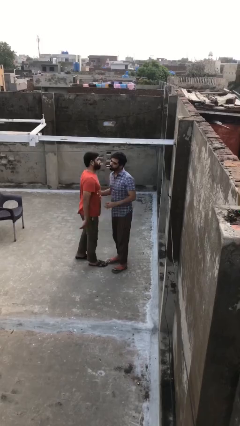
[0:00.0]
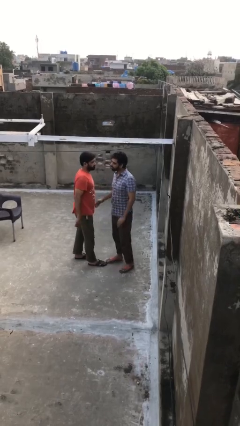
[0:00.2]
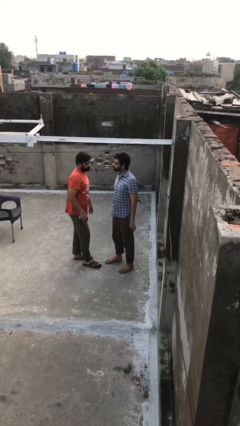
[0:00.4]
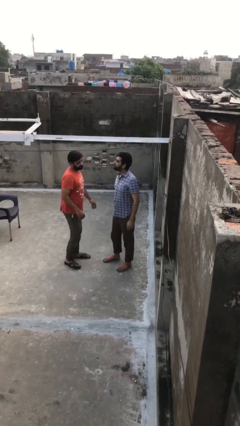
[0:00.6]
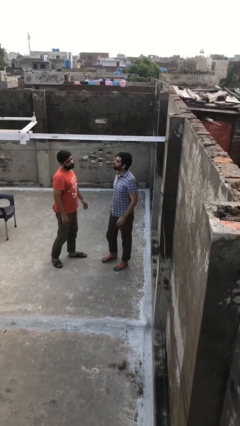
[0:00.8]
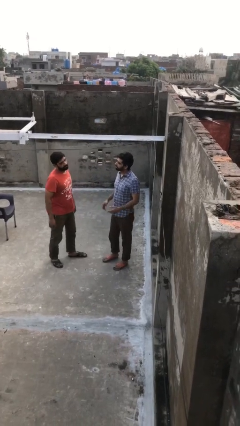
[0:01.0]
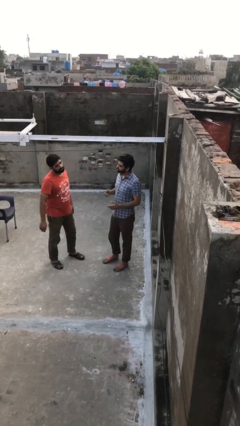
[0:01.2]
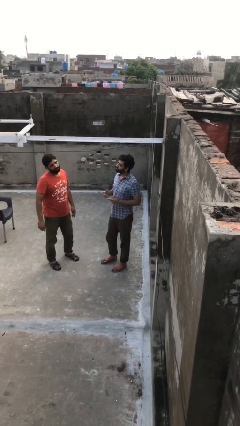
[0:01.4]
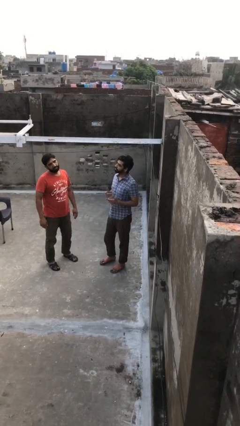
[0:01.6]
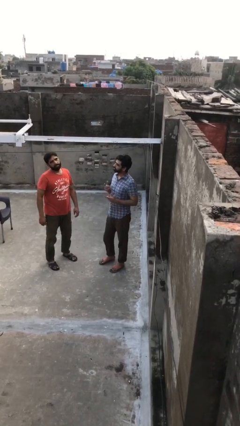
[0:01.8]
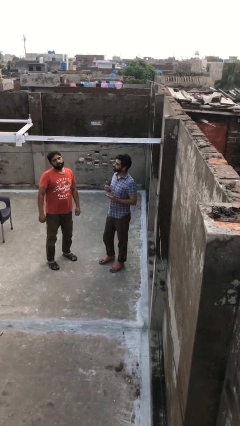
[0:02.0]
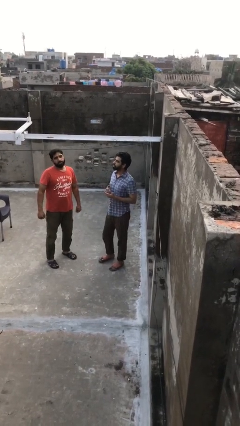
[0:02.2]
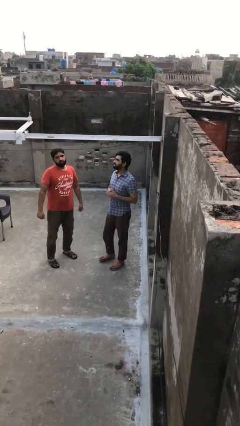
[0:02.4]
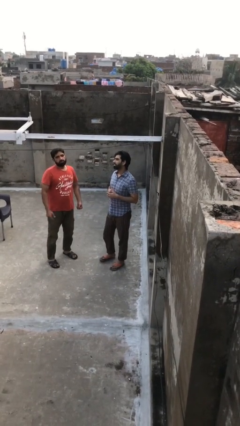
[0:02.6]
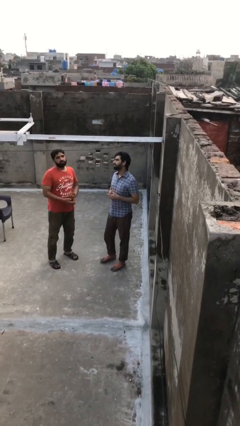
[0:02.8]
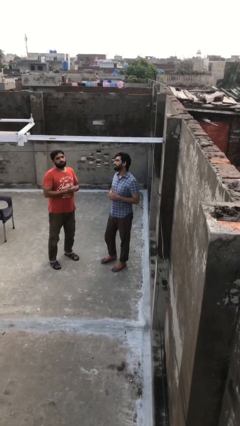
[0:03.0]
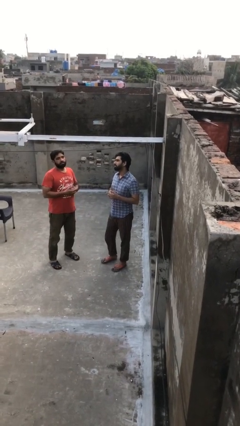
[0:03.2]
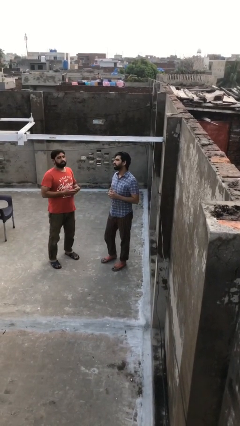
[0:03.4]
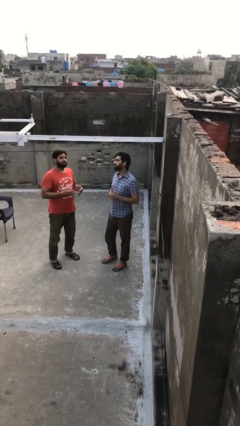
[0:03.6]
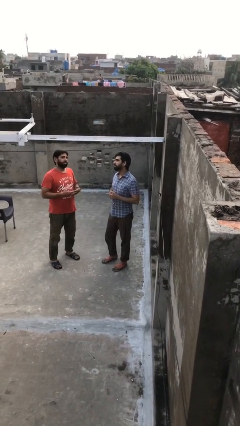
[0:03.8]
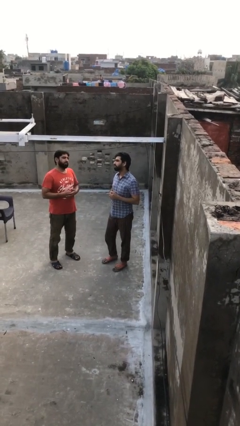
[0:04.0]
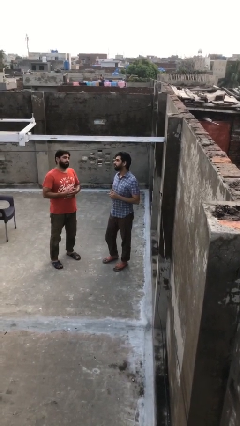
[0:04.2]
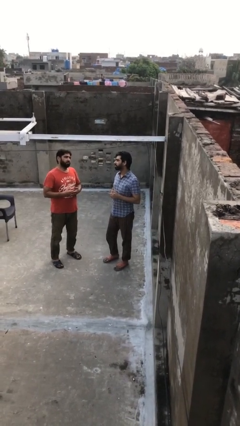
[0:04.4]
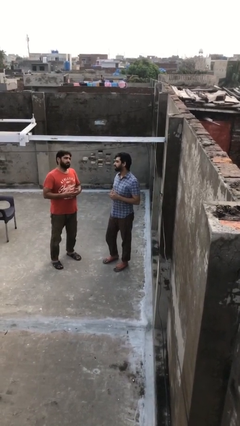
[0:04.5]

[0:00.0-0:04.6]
person talks to person

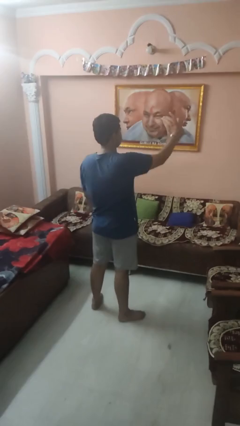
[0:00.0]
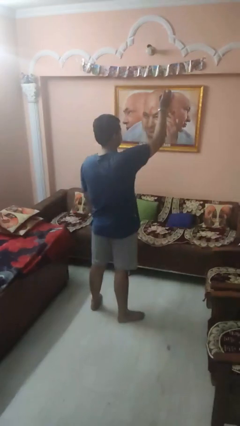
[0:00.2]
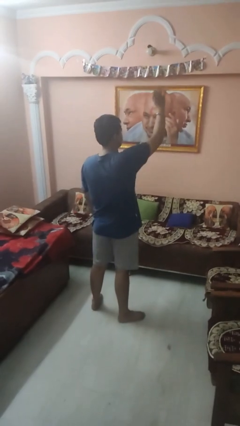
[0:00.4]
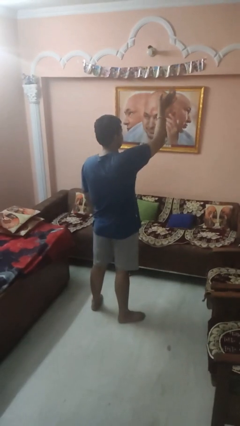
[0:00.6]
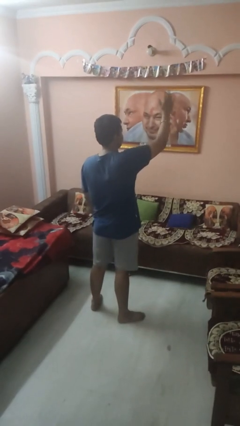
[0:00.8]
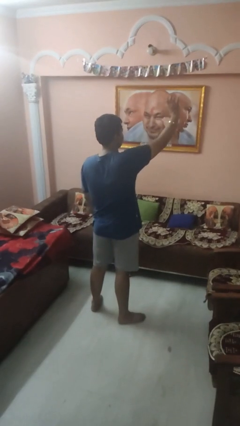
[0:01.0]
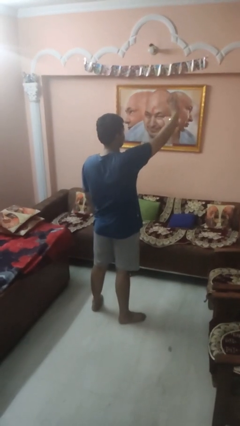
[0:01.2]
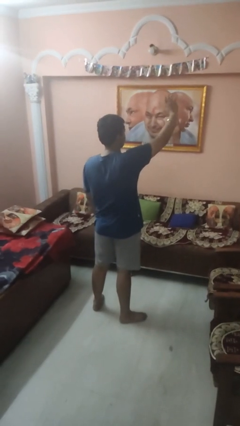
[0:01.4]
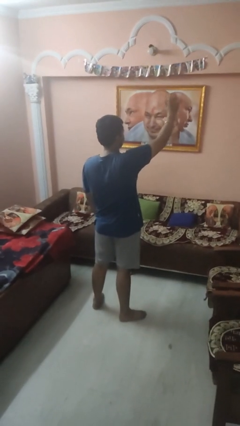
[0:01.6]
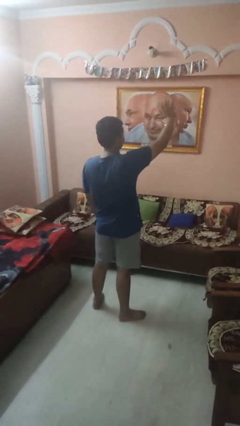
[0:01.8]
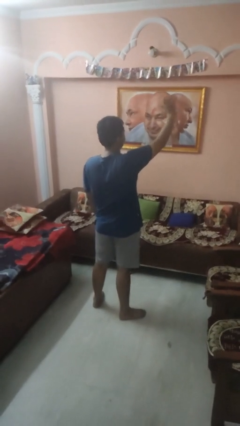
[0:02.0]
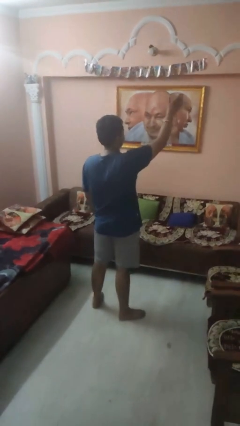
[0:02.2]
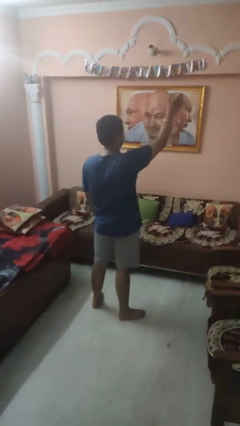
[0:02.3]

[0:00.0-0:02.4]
person waves at person

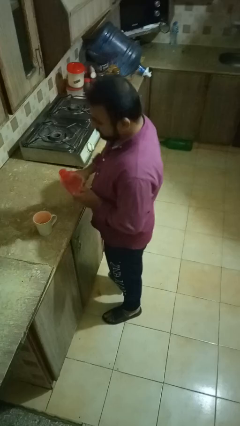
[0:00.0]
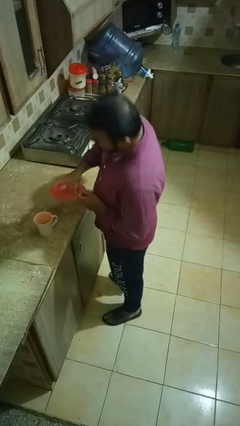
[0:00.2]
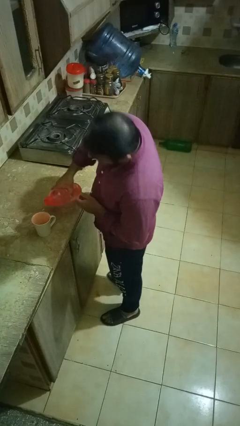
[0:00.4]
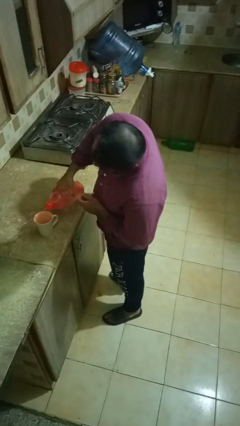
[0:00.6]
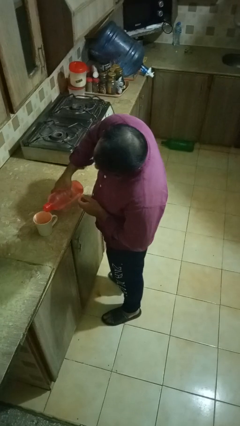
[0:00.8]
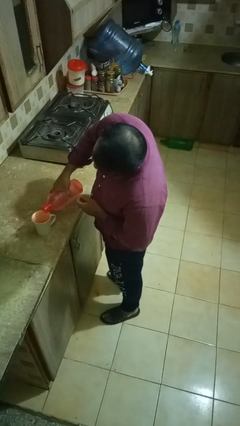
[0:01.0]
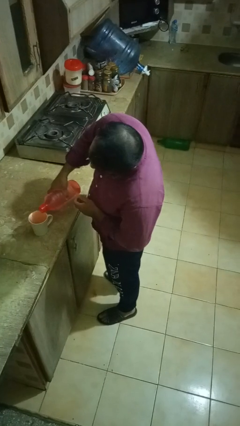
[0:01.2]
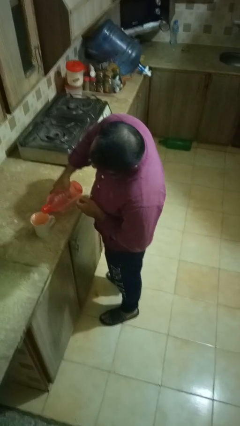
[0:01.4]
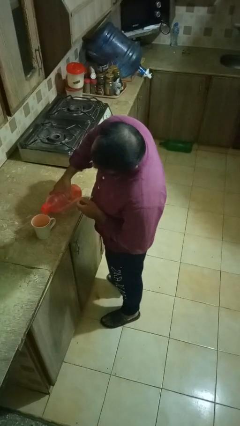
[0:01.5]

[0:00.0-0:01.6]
person pours liquid into cup

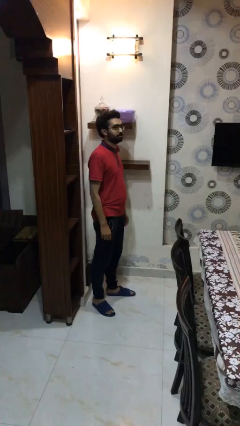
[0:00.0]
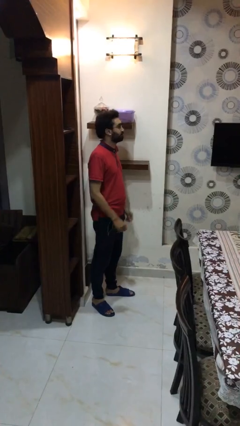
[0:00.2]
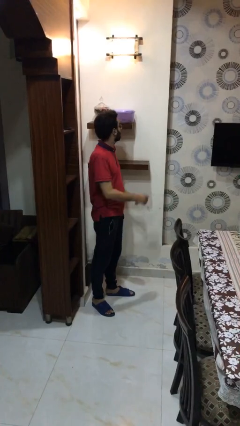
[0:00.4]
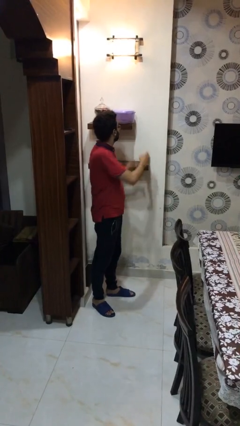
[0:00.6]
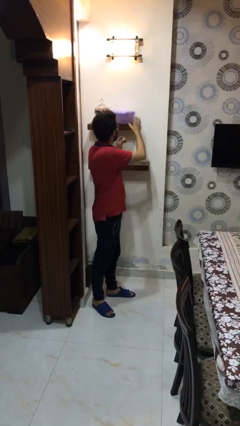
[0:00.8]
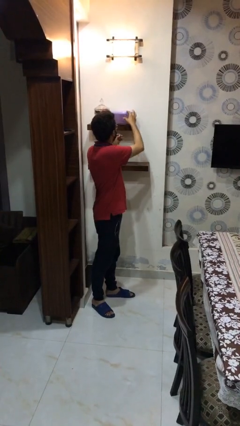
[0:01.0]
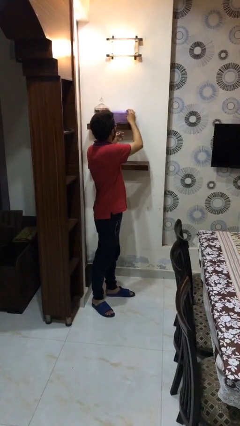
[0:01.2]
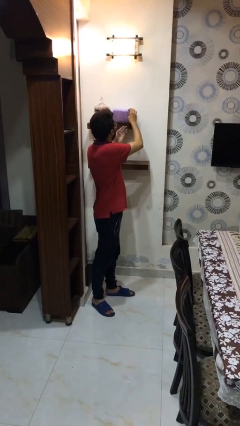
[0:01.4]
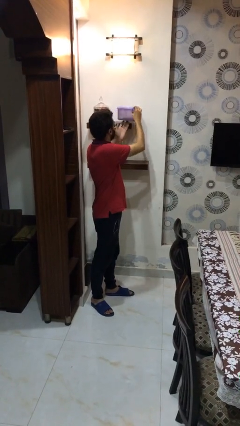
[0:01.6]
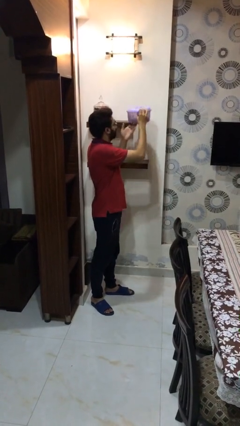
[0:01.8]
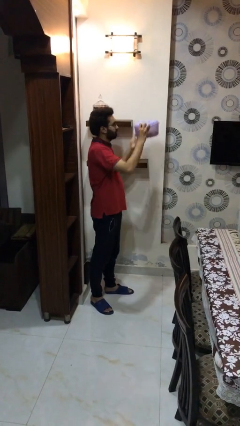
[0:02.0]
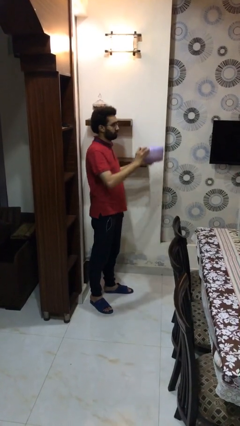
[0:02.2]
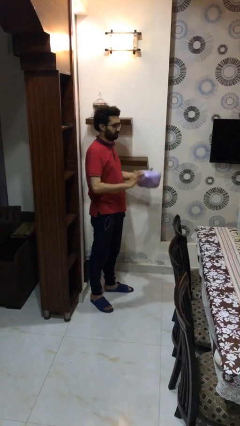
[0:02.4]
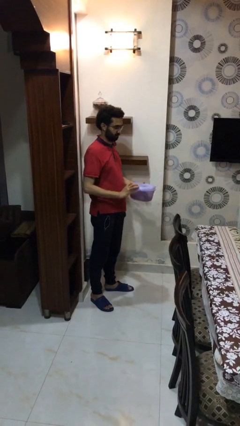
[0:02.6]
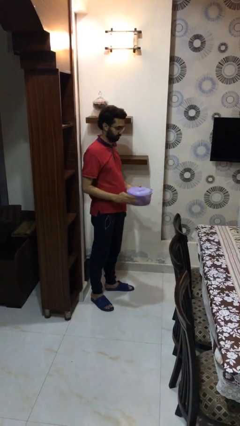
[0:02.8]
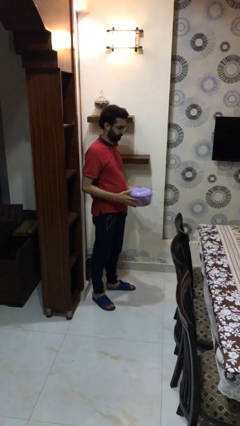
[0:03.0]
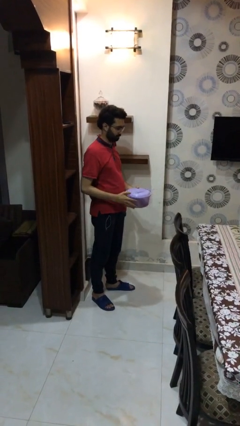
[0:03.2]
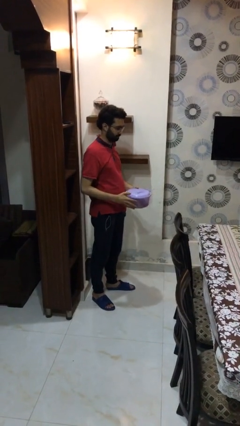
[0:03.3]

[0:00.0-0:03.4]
person picks up object from shelf

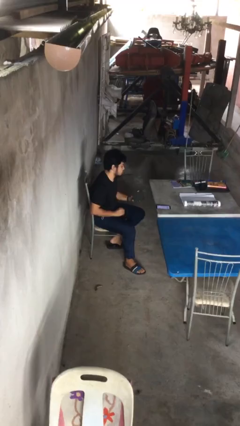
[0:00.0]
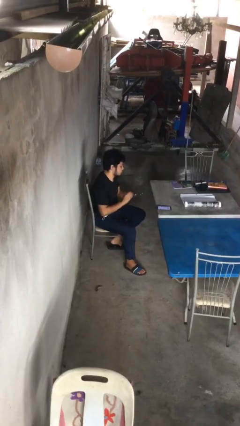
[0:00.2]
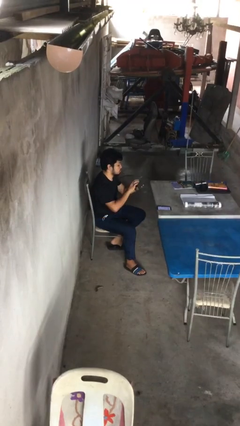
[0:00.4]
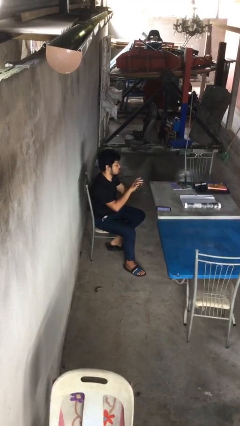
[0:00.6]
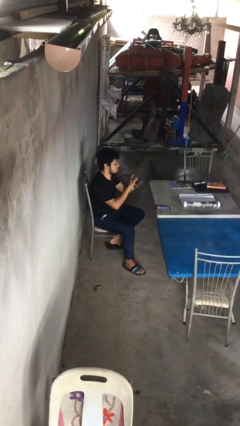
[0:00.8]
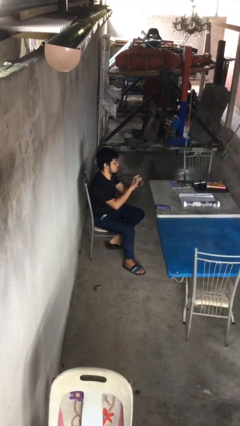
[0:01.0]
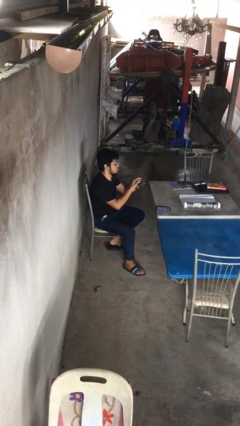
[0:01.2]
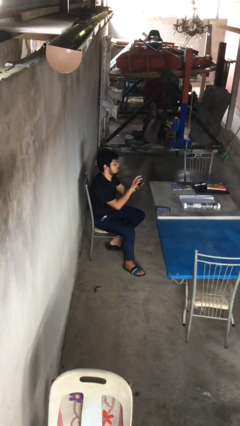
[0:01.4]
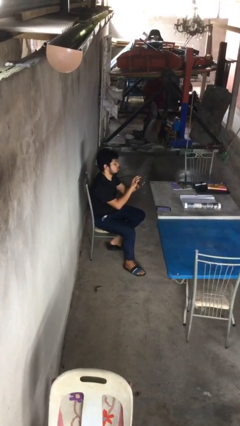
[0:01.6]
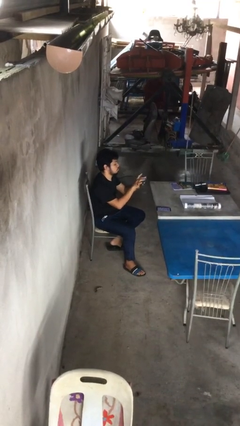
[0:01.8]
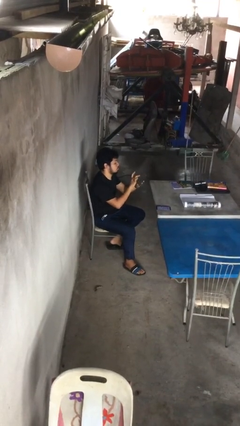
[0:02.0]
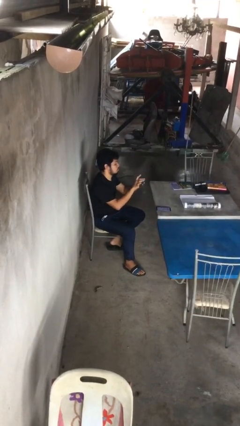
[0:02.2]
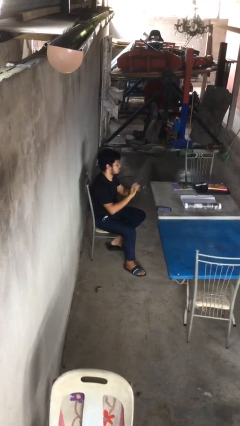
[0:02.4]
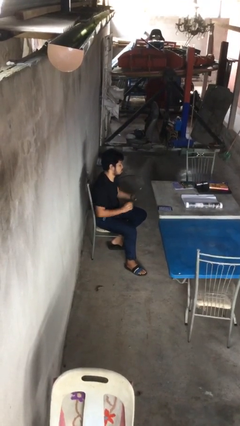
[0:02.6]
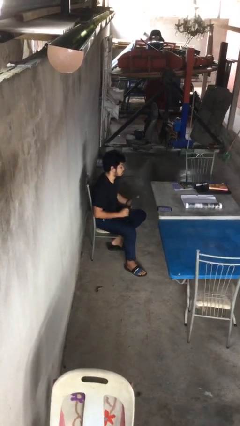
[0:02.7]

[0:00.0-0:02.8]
person interacts with tablet

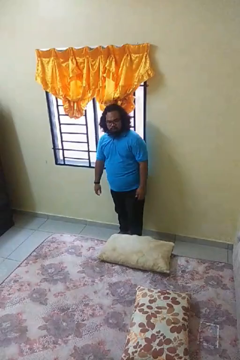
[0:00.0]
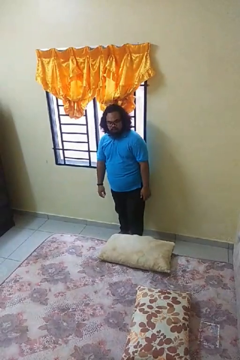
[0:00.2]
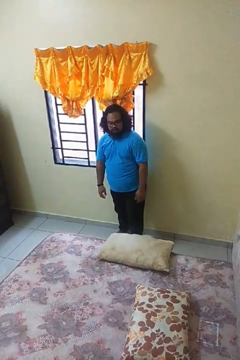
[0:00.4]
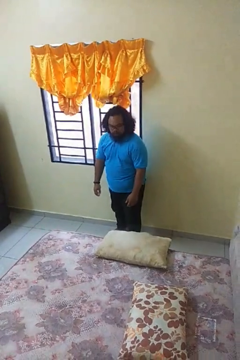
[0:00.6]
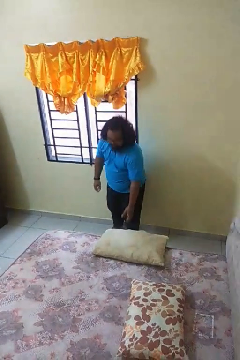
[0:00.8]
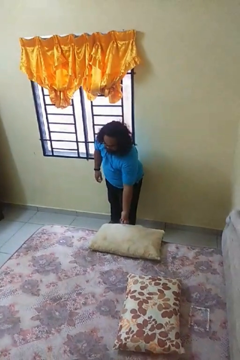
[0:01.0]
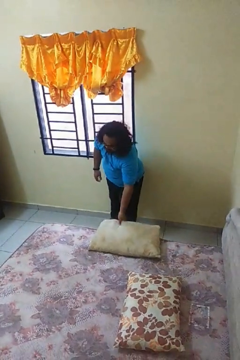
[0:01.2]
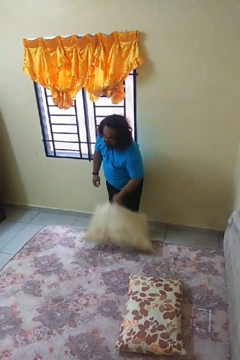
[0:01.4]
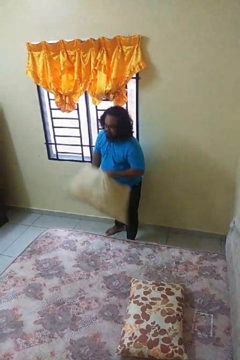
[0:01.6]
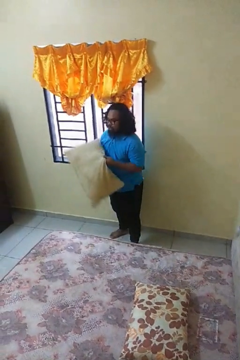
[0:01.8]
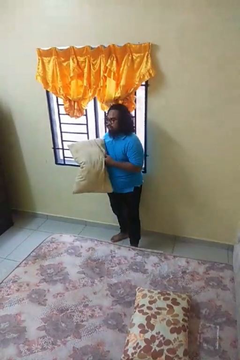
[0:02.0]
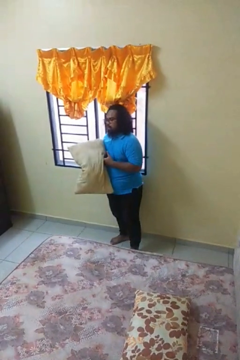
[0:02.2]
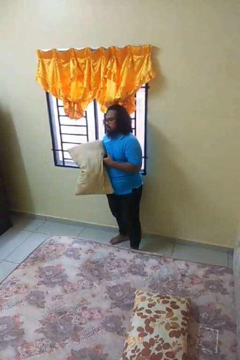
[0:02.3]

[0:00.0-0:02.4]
person picks up object from bed
